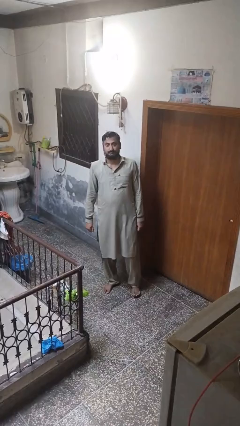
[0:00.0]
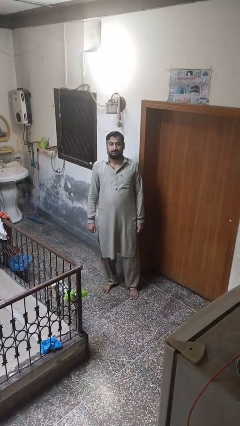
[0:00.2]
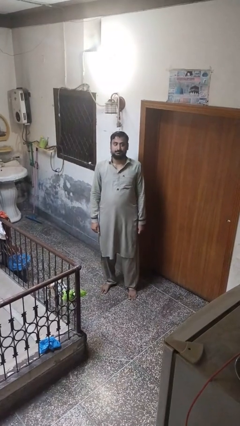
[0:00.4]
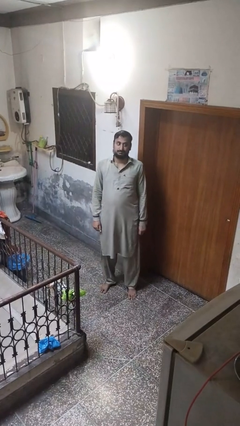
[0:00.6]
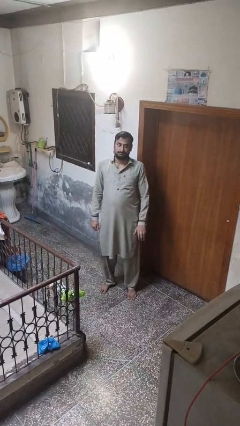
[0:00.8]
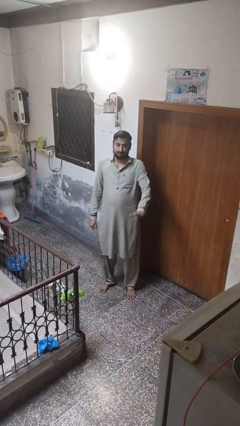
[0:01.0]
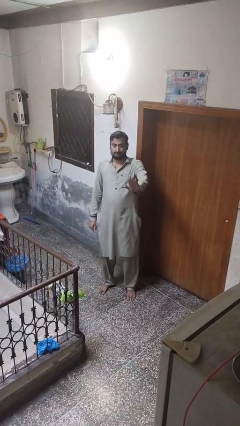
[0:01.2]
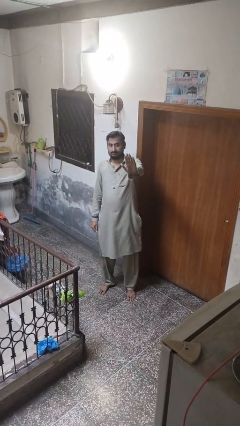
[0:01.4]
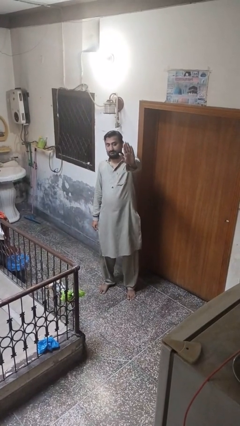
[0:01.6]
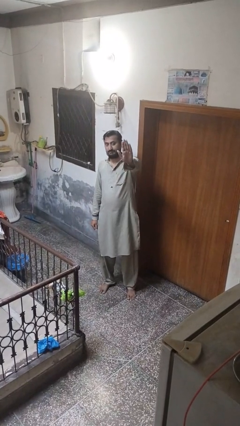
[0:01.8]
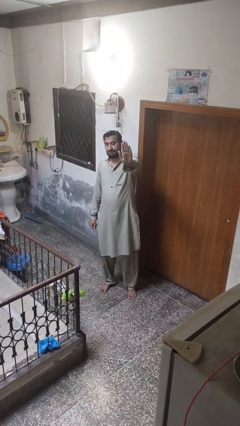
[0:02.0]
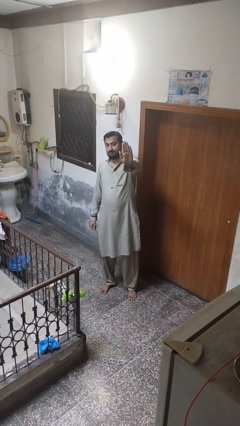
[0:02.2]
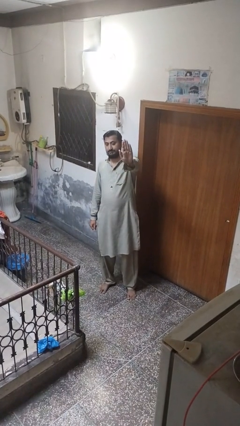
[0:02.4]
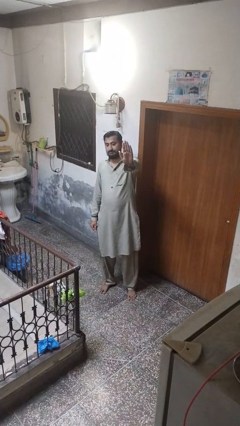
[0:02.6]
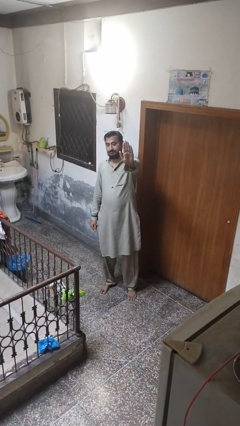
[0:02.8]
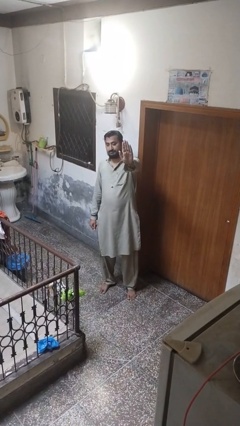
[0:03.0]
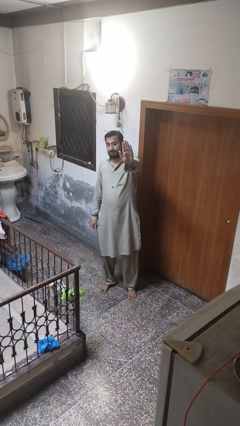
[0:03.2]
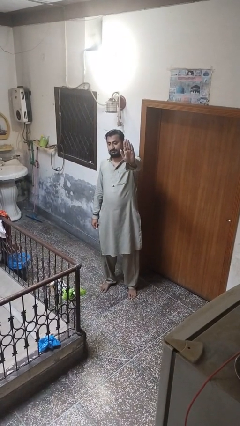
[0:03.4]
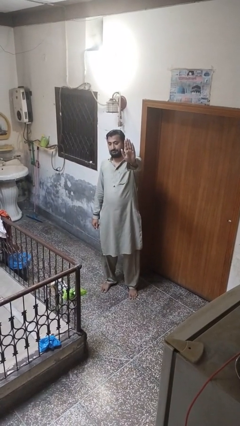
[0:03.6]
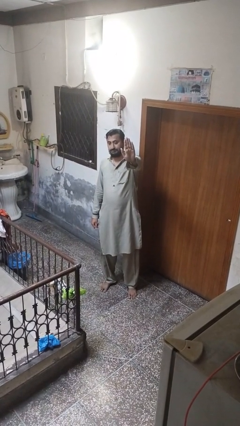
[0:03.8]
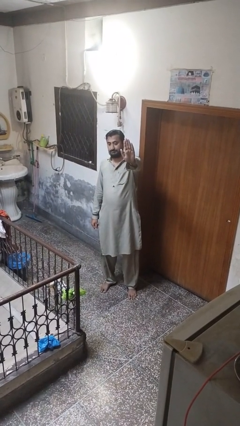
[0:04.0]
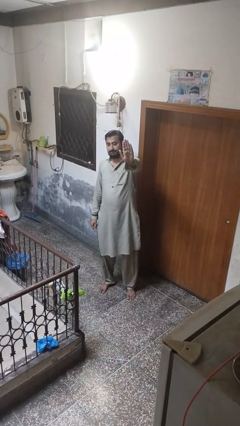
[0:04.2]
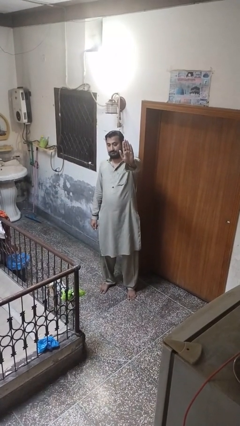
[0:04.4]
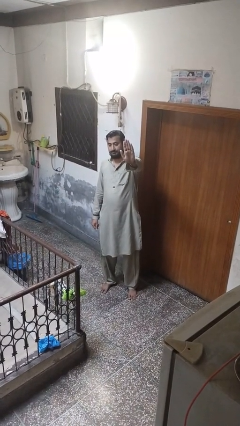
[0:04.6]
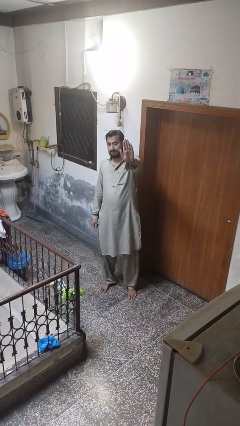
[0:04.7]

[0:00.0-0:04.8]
person gestures stop

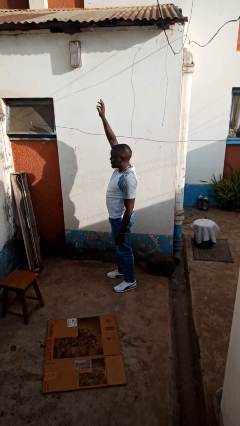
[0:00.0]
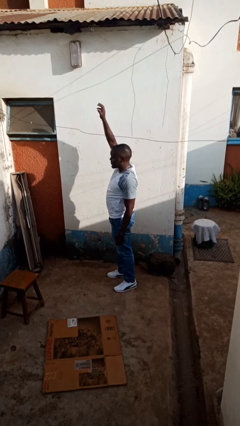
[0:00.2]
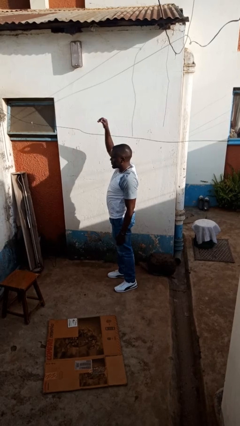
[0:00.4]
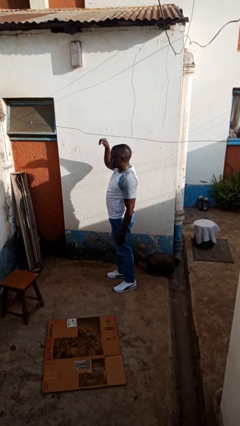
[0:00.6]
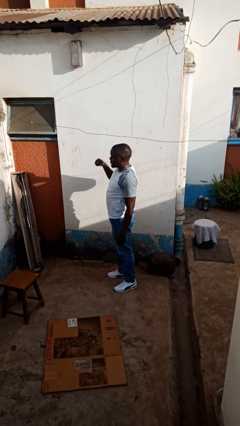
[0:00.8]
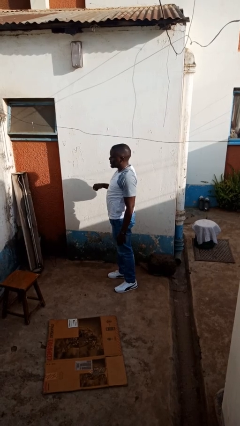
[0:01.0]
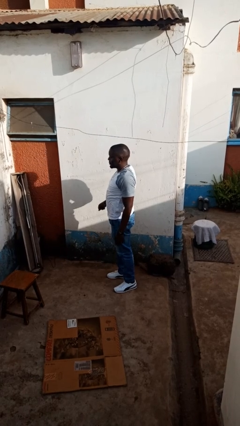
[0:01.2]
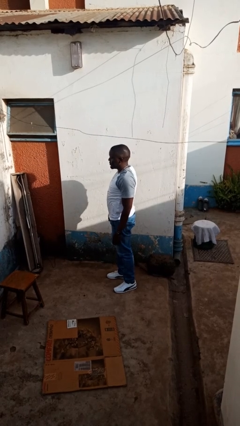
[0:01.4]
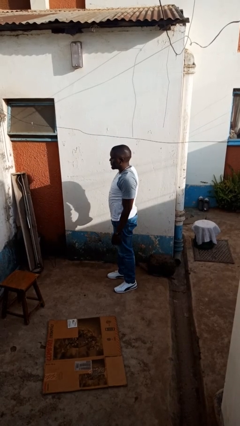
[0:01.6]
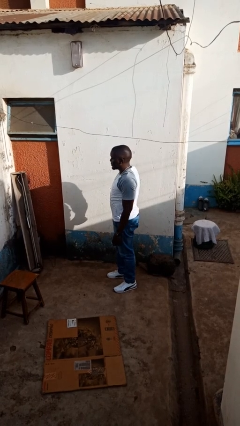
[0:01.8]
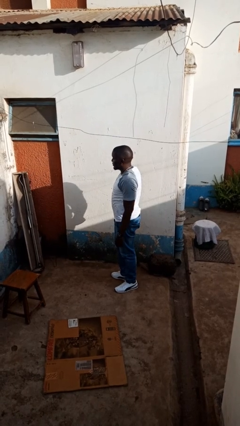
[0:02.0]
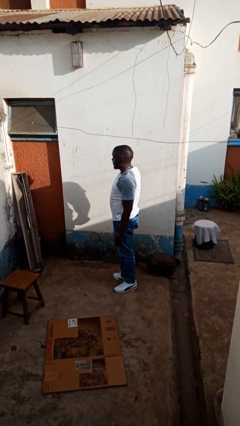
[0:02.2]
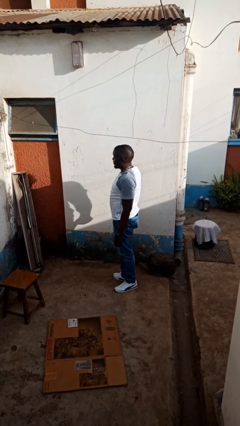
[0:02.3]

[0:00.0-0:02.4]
person gestures lower hand

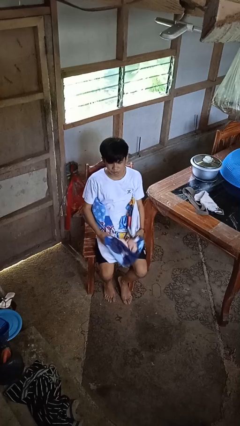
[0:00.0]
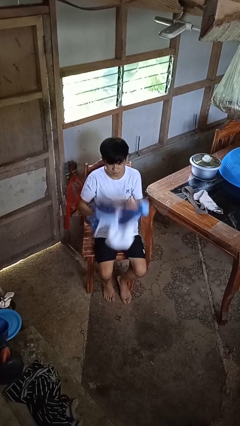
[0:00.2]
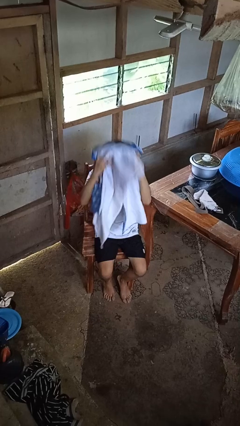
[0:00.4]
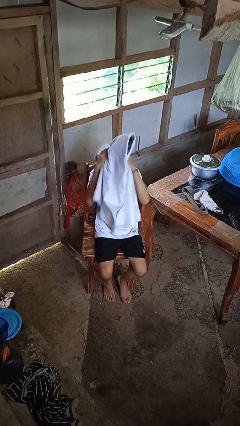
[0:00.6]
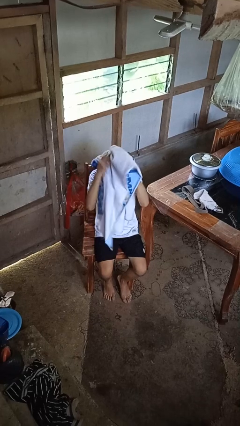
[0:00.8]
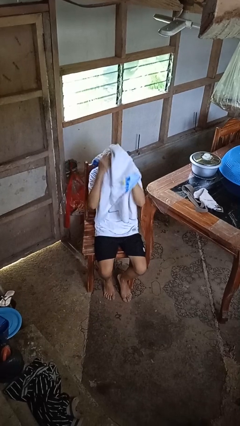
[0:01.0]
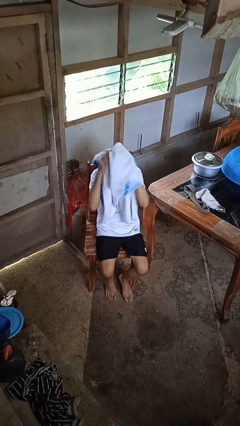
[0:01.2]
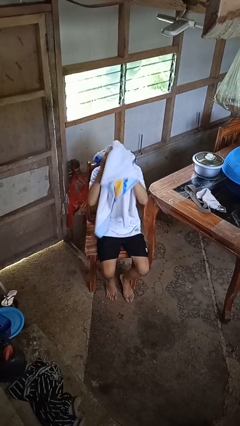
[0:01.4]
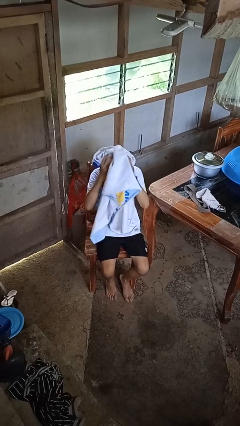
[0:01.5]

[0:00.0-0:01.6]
person dries hair with towel

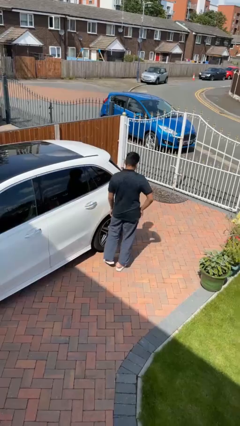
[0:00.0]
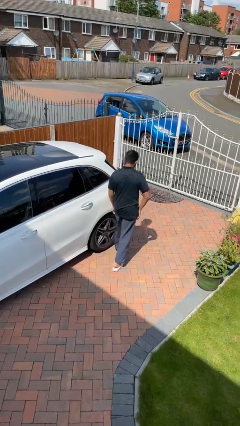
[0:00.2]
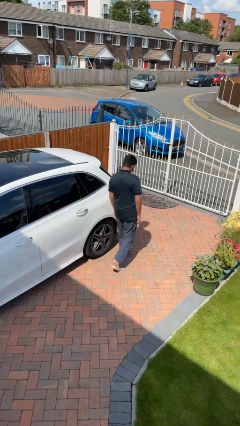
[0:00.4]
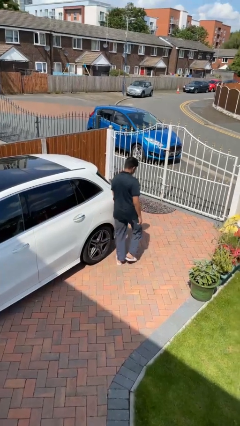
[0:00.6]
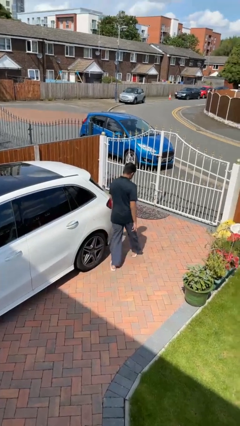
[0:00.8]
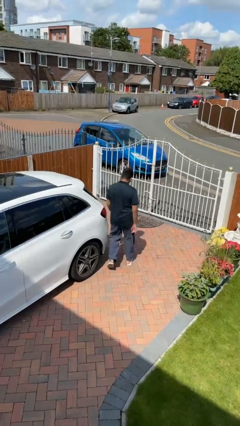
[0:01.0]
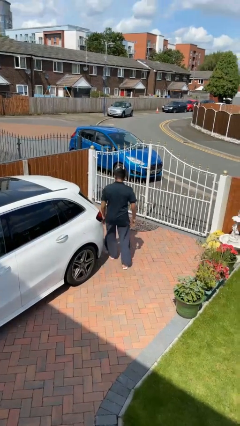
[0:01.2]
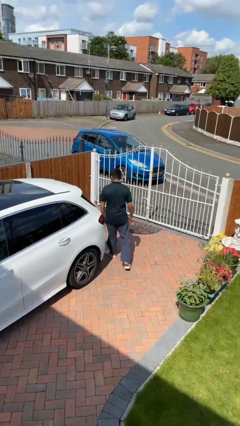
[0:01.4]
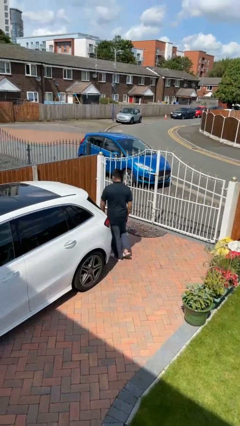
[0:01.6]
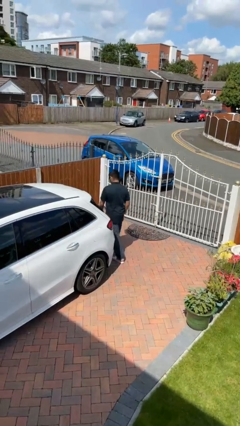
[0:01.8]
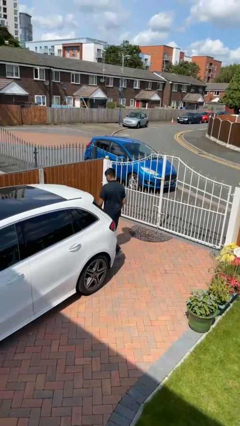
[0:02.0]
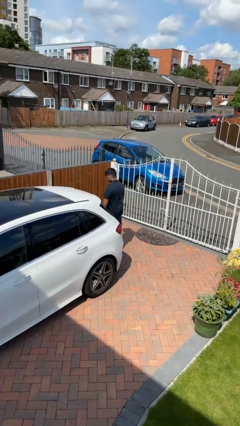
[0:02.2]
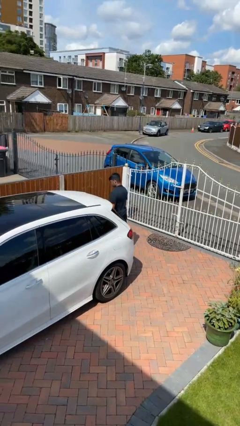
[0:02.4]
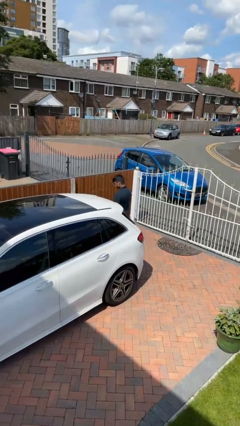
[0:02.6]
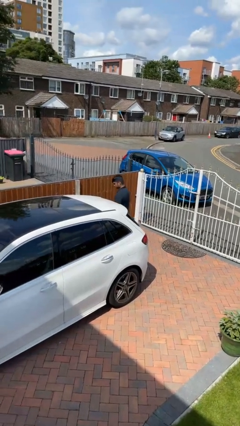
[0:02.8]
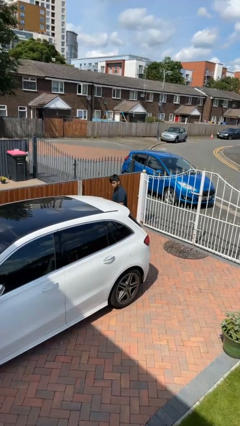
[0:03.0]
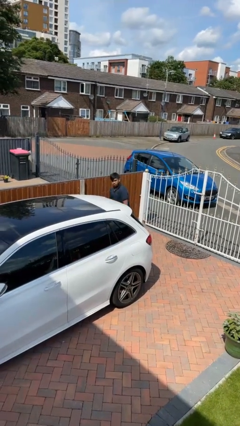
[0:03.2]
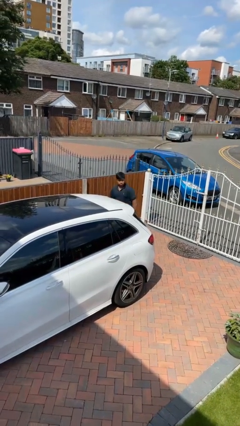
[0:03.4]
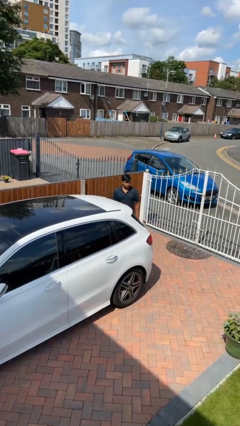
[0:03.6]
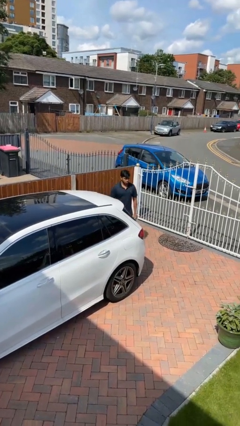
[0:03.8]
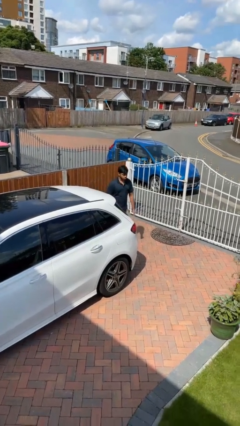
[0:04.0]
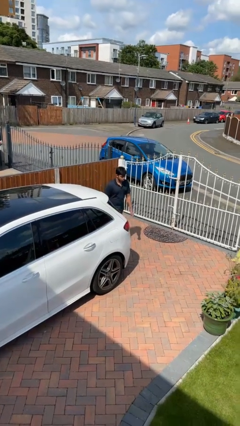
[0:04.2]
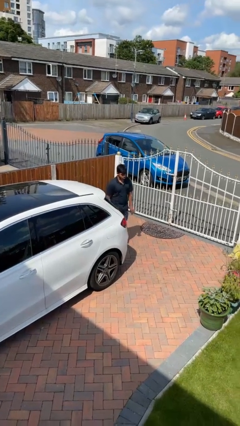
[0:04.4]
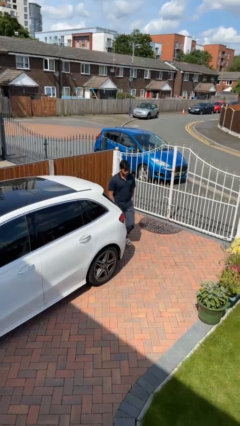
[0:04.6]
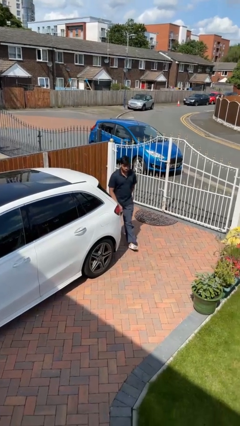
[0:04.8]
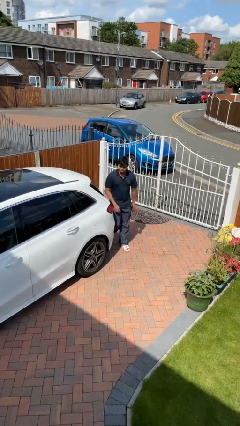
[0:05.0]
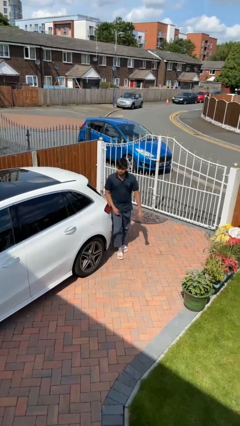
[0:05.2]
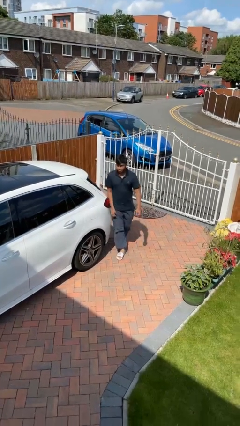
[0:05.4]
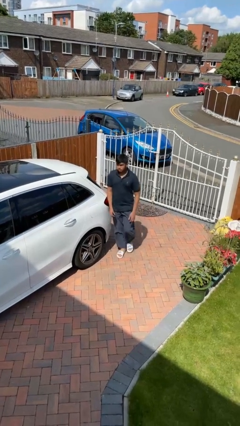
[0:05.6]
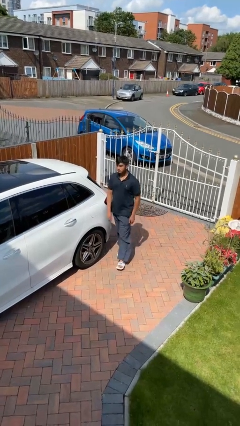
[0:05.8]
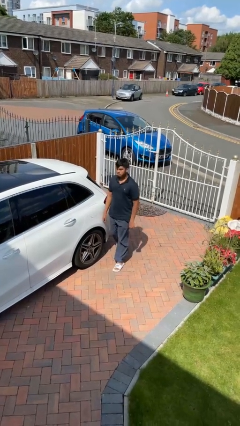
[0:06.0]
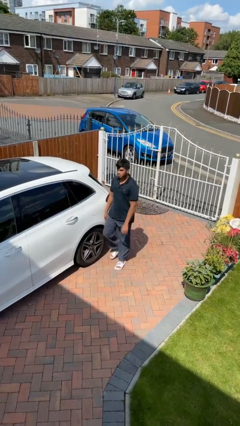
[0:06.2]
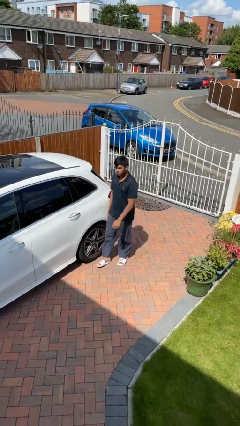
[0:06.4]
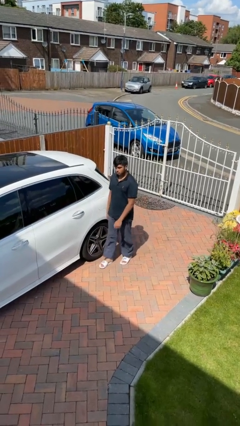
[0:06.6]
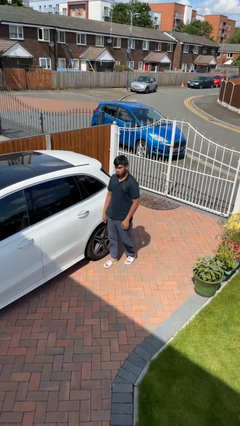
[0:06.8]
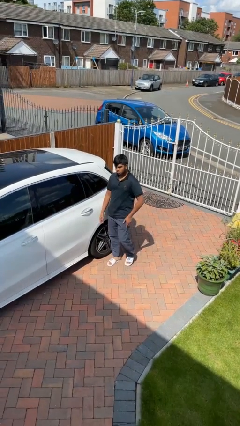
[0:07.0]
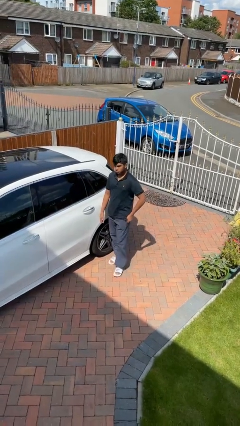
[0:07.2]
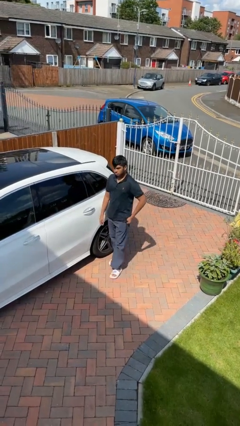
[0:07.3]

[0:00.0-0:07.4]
person walks around car

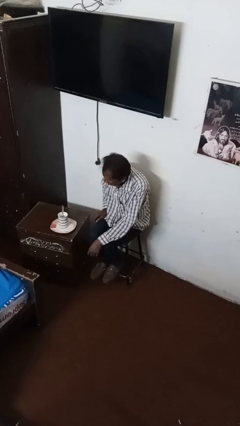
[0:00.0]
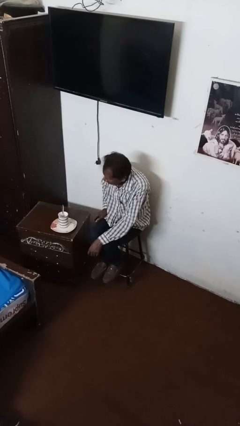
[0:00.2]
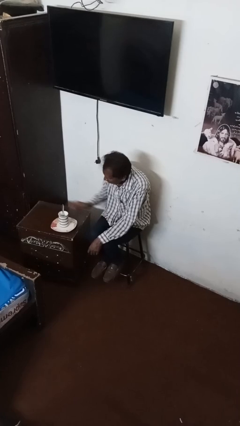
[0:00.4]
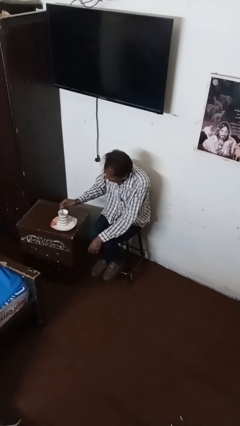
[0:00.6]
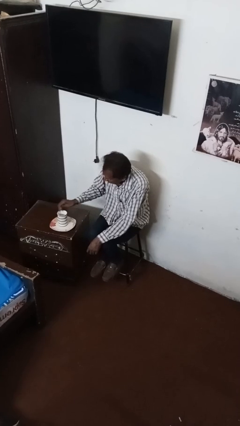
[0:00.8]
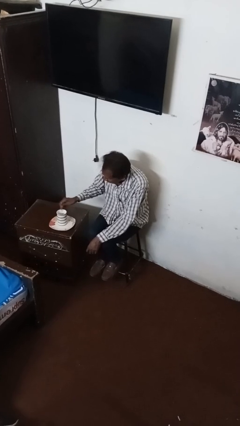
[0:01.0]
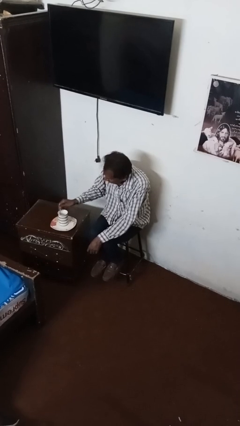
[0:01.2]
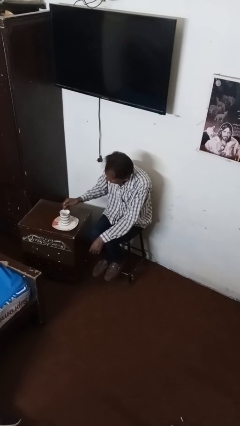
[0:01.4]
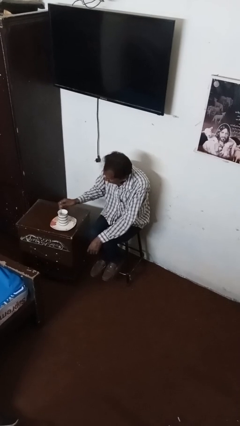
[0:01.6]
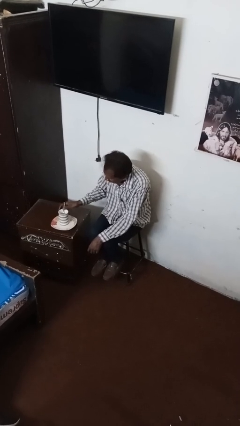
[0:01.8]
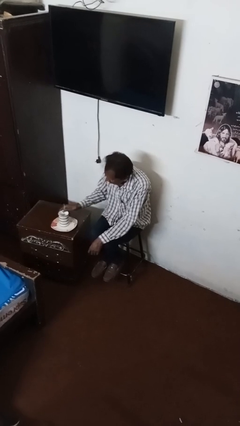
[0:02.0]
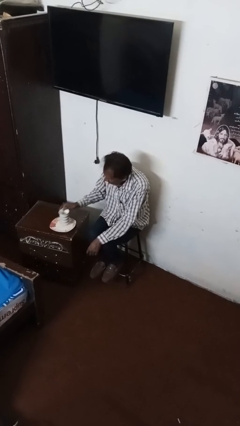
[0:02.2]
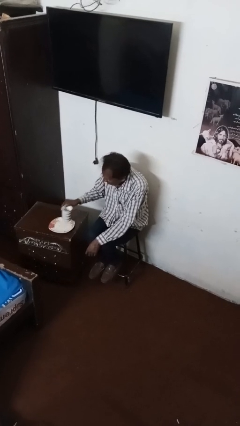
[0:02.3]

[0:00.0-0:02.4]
person stirs mug
